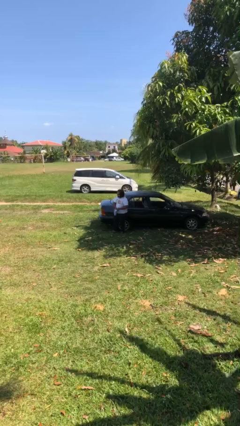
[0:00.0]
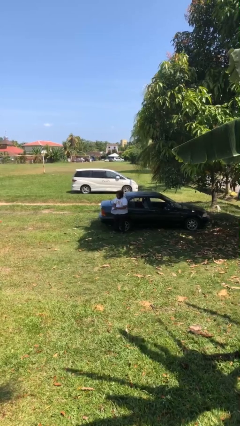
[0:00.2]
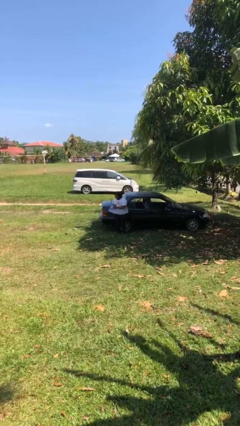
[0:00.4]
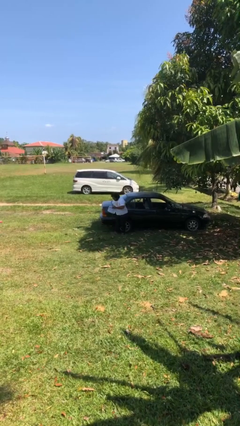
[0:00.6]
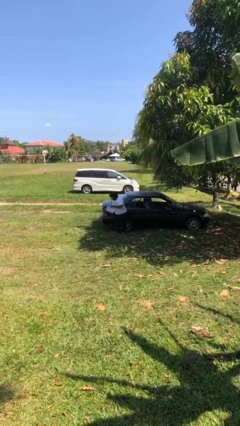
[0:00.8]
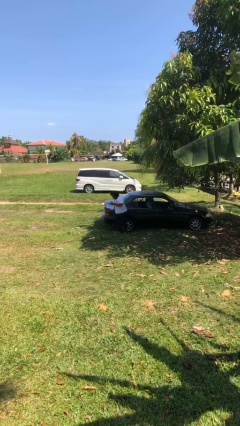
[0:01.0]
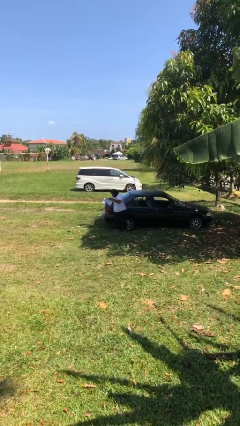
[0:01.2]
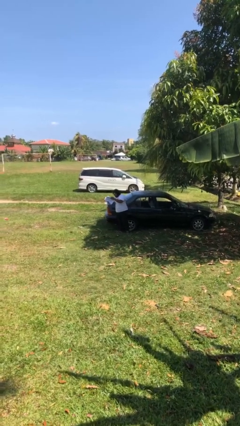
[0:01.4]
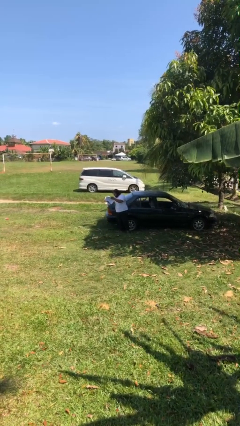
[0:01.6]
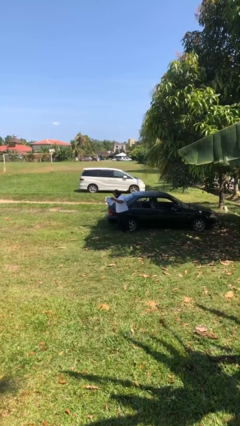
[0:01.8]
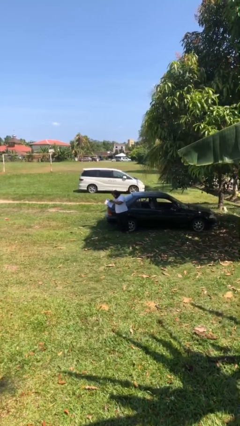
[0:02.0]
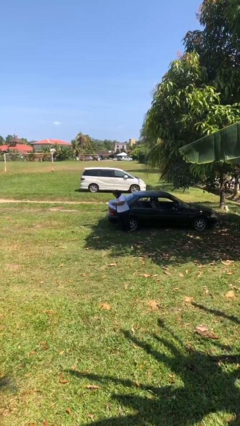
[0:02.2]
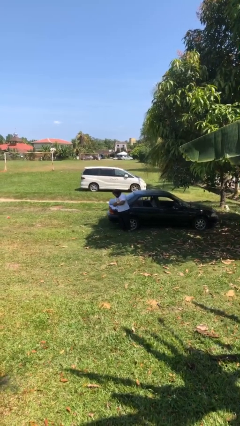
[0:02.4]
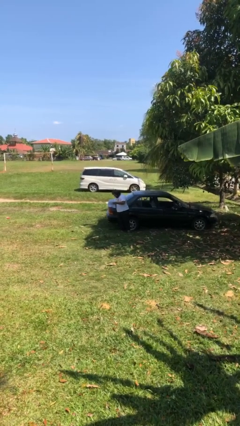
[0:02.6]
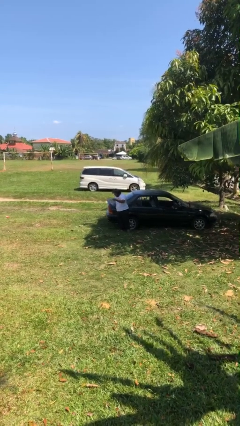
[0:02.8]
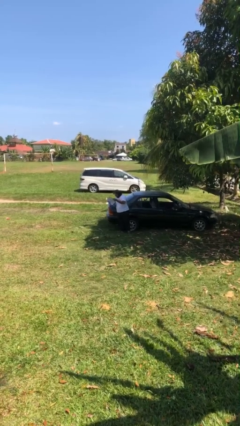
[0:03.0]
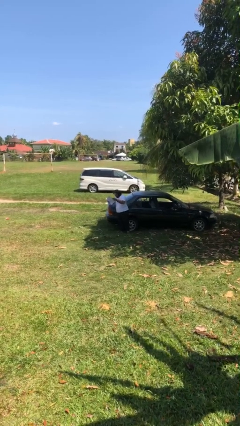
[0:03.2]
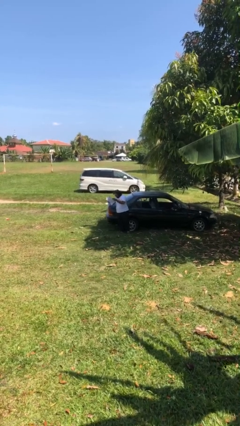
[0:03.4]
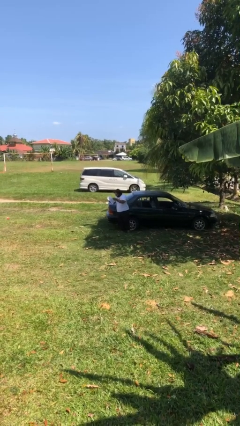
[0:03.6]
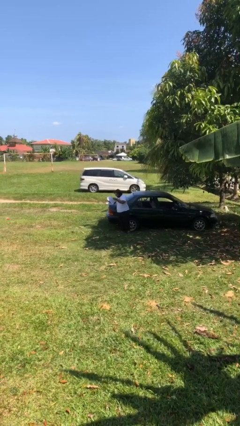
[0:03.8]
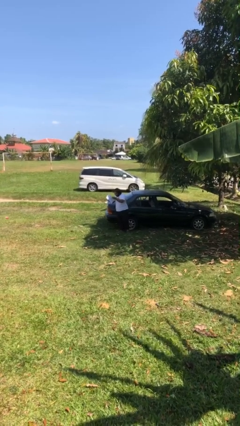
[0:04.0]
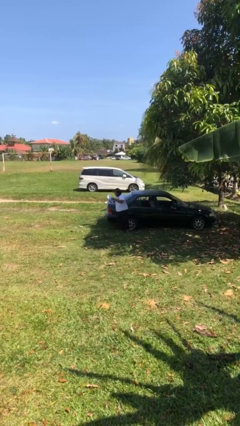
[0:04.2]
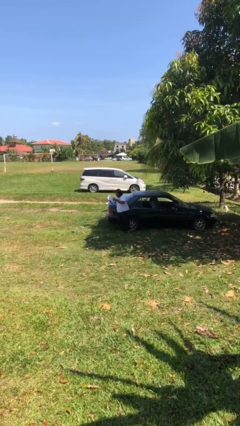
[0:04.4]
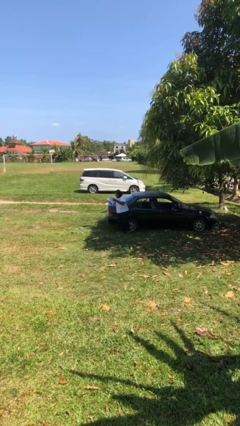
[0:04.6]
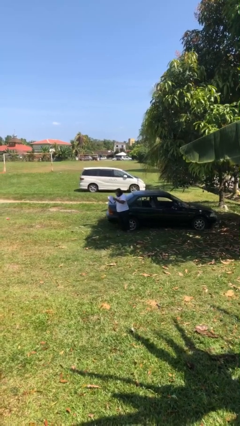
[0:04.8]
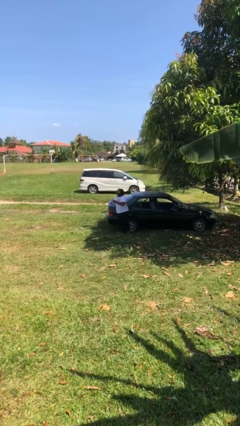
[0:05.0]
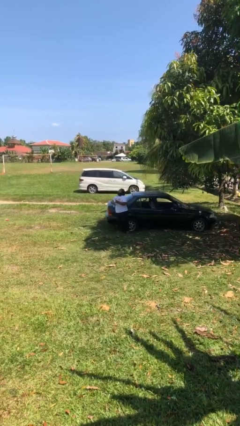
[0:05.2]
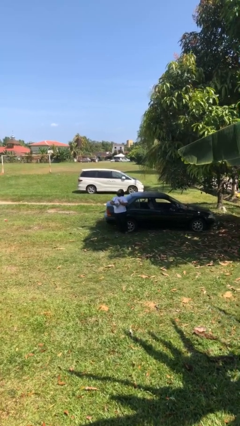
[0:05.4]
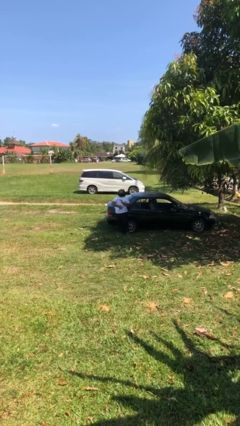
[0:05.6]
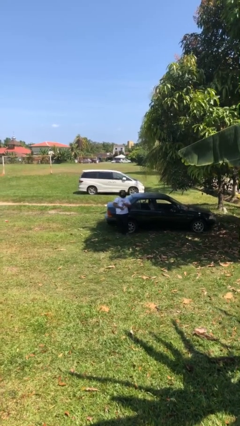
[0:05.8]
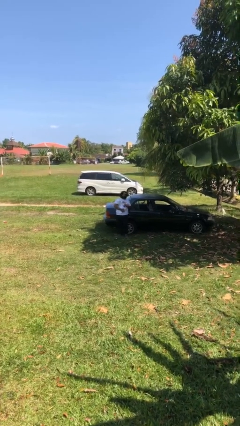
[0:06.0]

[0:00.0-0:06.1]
person reads document

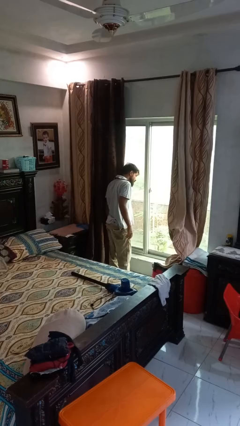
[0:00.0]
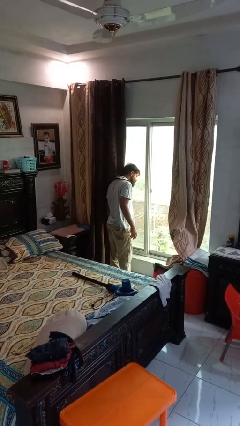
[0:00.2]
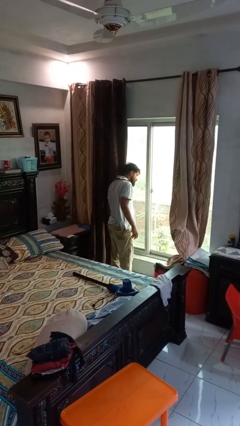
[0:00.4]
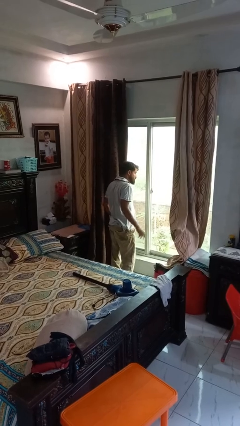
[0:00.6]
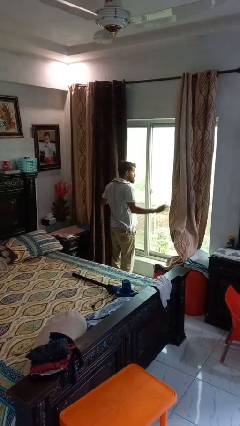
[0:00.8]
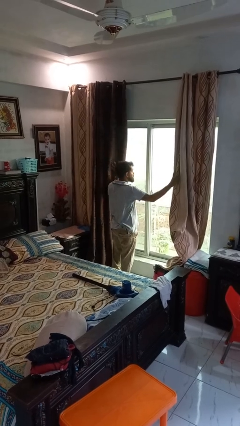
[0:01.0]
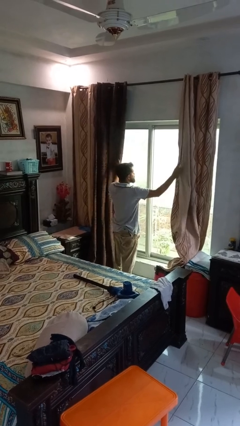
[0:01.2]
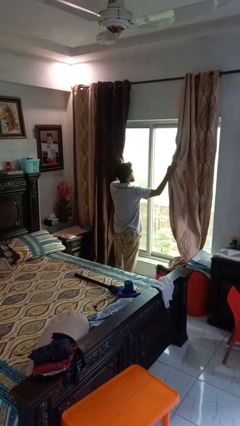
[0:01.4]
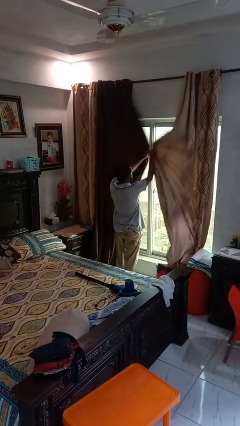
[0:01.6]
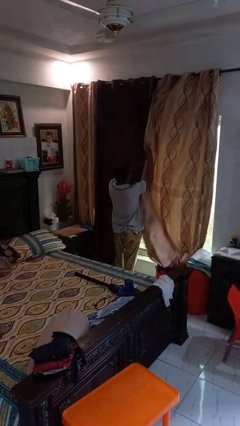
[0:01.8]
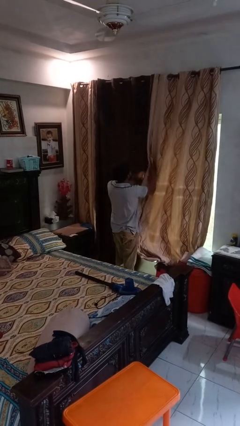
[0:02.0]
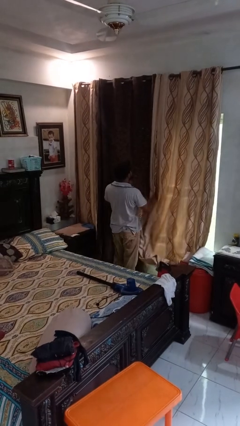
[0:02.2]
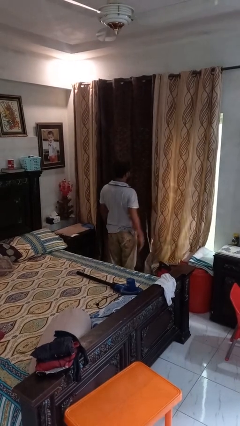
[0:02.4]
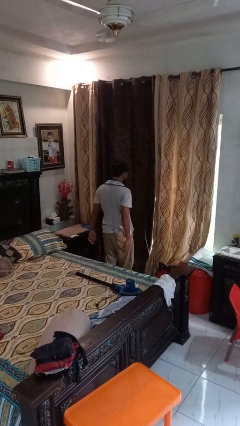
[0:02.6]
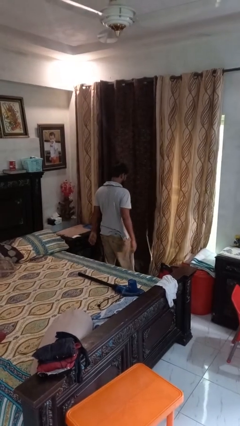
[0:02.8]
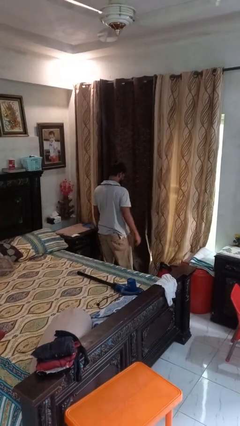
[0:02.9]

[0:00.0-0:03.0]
person closes curtains

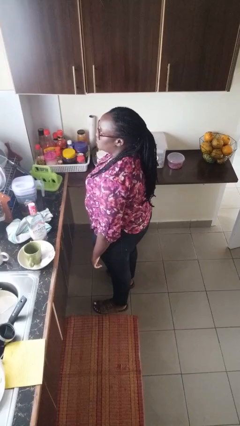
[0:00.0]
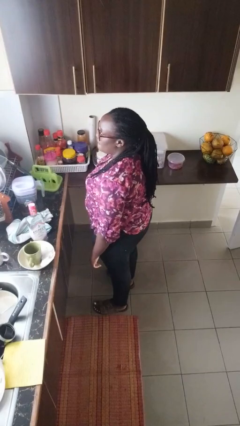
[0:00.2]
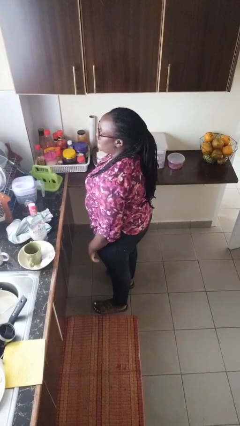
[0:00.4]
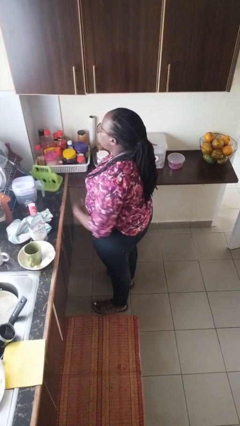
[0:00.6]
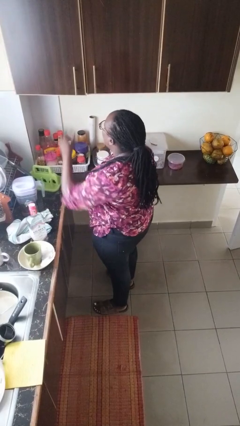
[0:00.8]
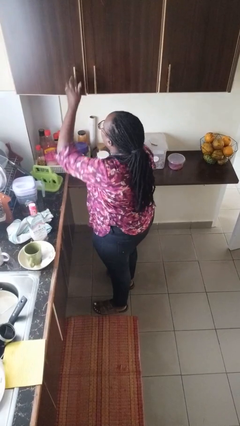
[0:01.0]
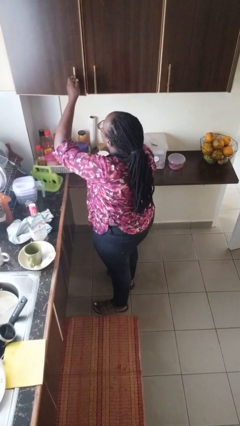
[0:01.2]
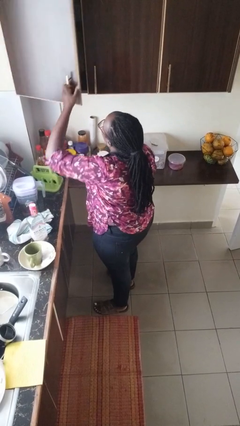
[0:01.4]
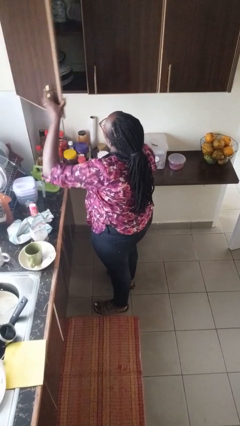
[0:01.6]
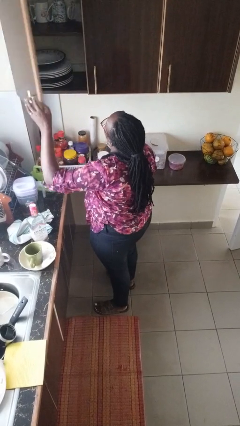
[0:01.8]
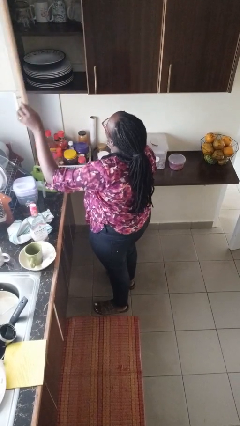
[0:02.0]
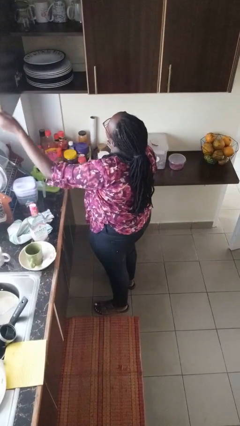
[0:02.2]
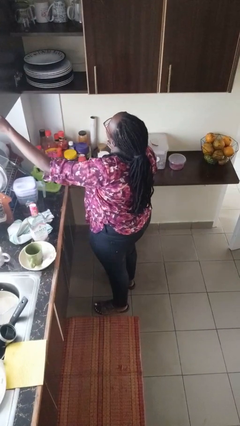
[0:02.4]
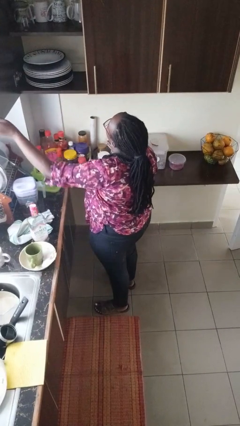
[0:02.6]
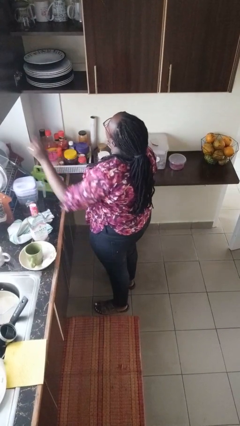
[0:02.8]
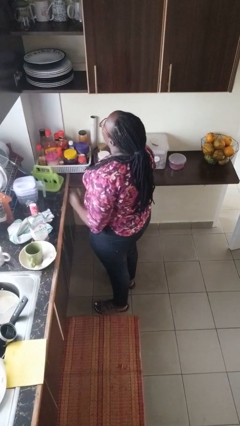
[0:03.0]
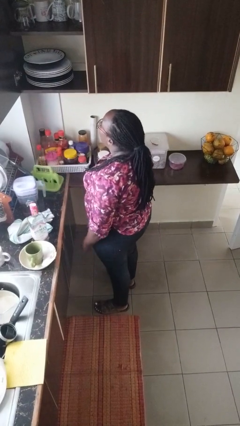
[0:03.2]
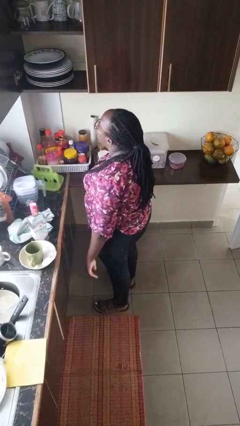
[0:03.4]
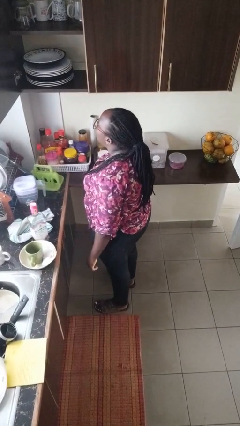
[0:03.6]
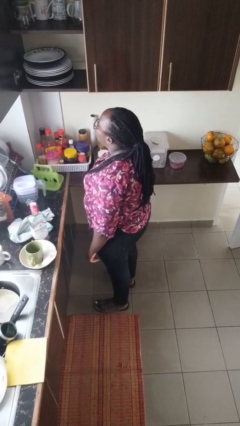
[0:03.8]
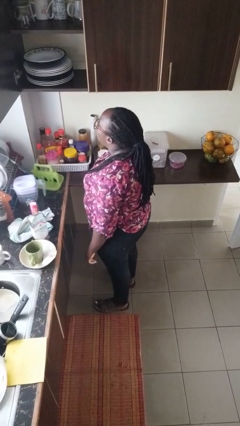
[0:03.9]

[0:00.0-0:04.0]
person opens cabinet

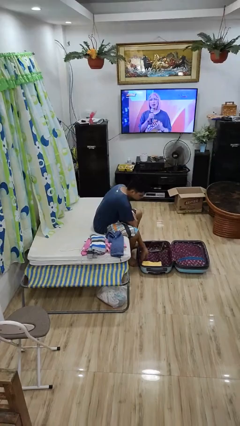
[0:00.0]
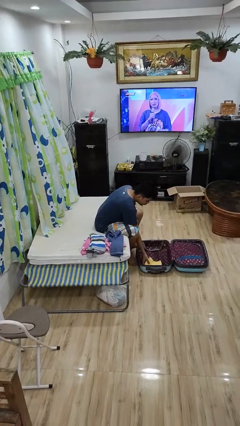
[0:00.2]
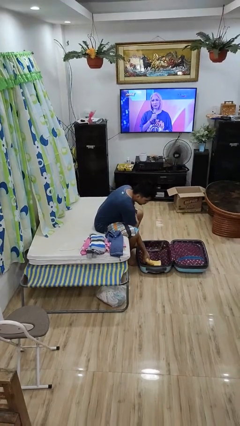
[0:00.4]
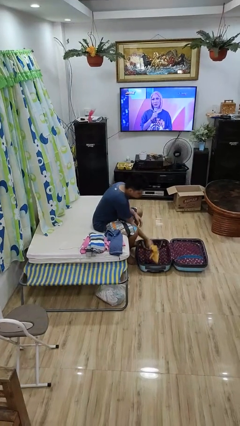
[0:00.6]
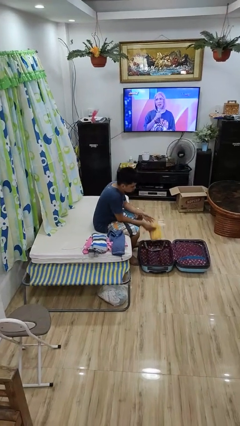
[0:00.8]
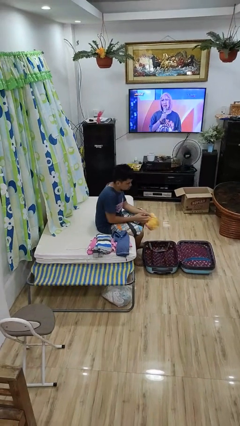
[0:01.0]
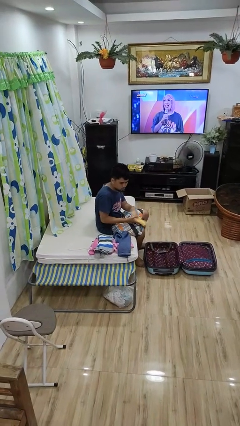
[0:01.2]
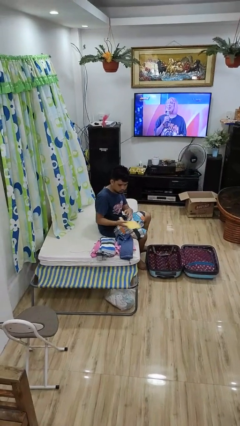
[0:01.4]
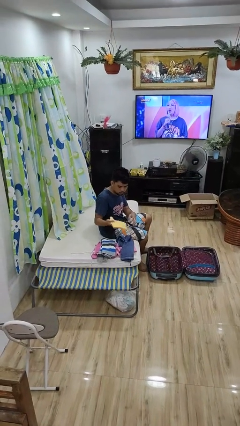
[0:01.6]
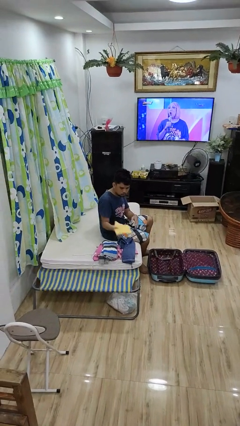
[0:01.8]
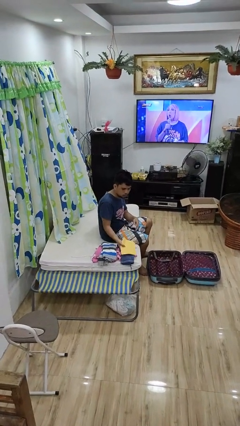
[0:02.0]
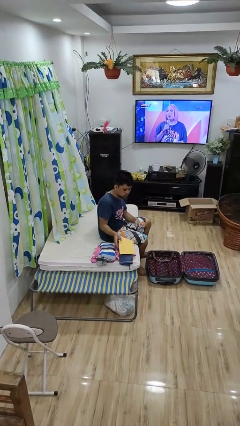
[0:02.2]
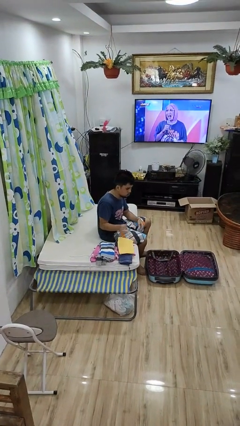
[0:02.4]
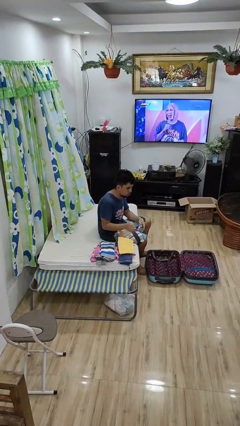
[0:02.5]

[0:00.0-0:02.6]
person unloads clothes from suitcase

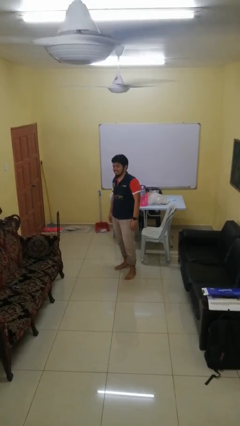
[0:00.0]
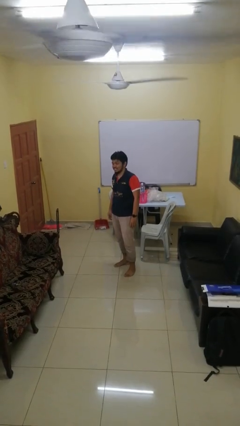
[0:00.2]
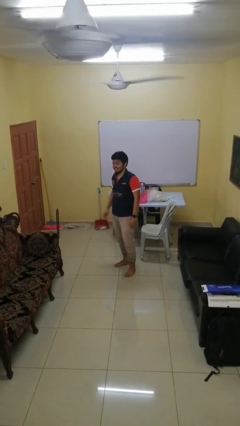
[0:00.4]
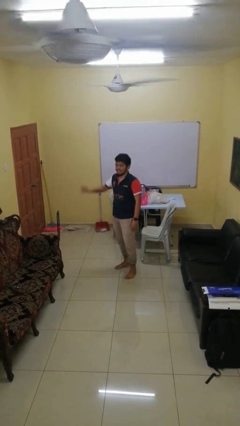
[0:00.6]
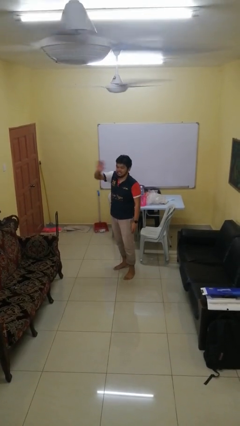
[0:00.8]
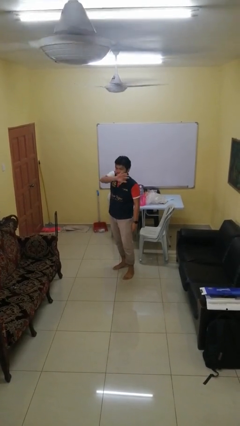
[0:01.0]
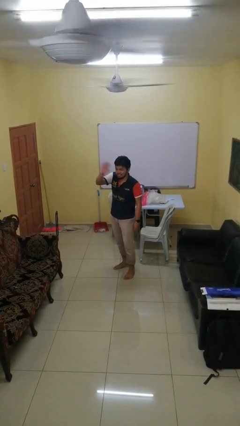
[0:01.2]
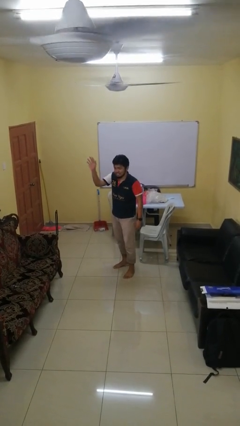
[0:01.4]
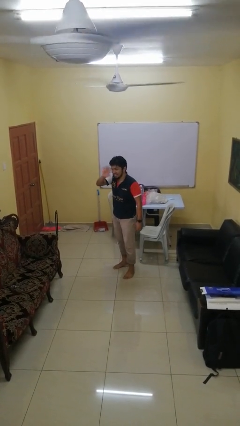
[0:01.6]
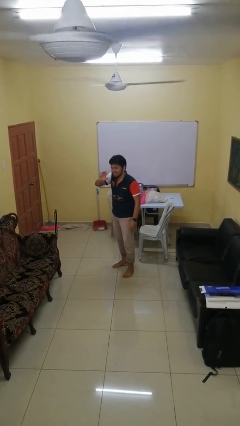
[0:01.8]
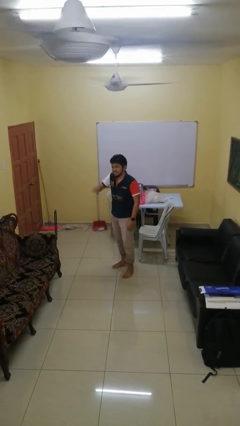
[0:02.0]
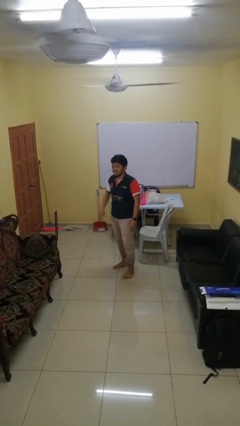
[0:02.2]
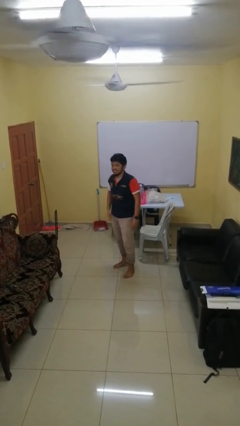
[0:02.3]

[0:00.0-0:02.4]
person waves at person
